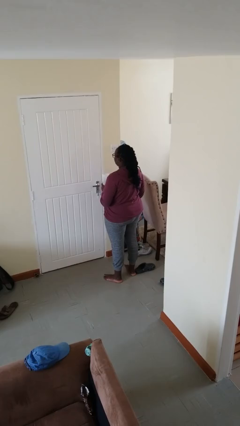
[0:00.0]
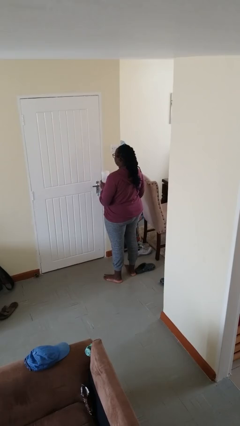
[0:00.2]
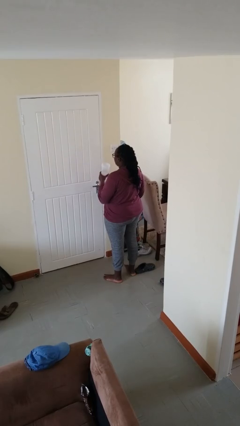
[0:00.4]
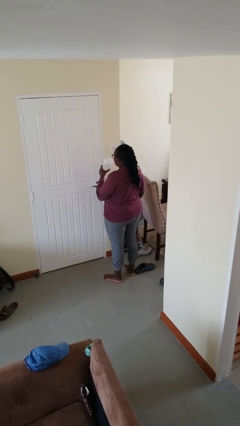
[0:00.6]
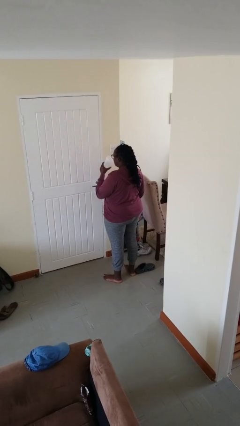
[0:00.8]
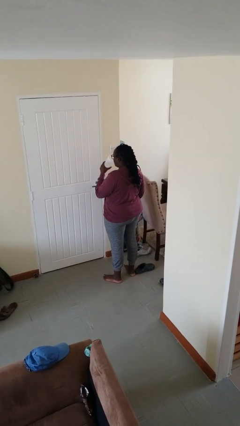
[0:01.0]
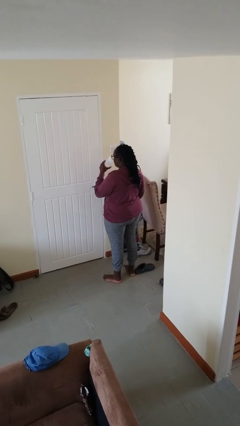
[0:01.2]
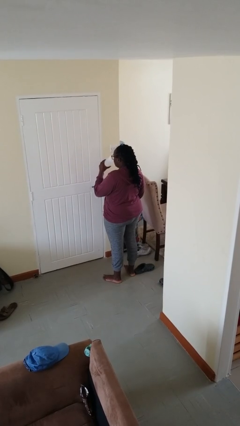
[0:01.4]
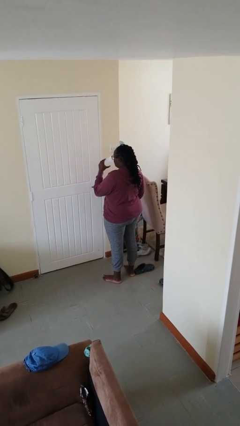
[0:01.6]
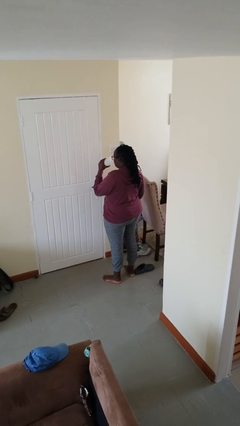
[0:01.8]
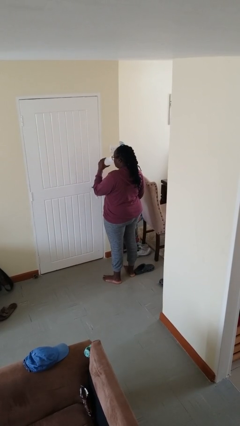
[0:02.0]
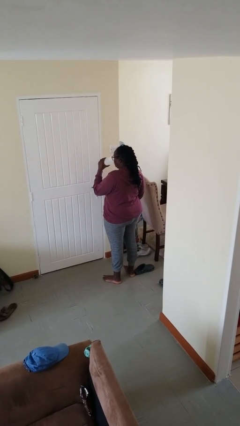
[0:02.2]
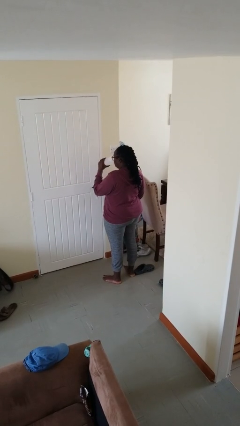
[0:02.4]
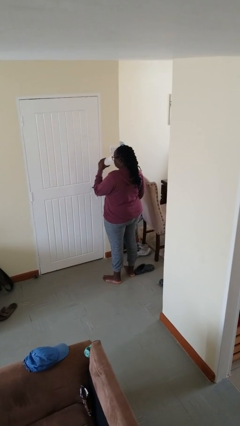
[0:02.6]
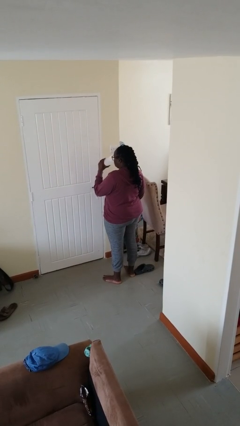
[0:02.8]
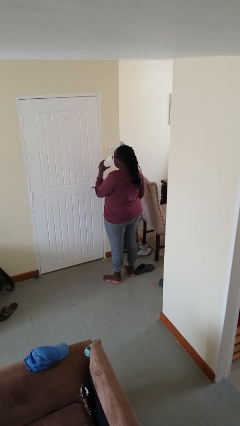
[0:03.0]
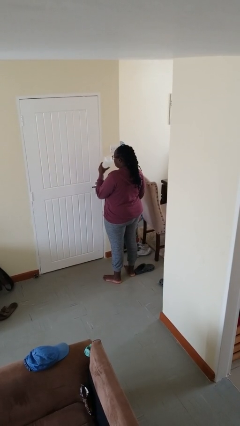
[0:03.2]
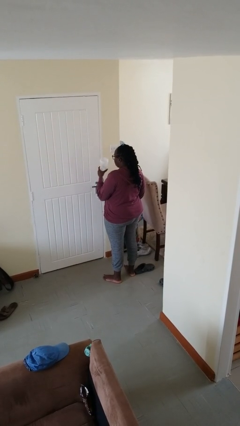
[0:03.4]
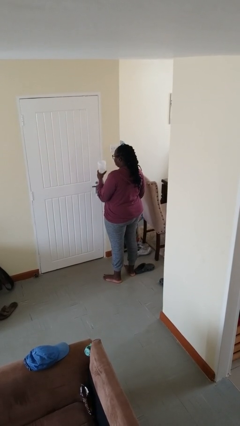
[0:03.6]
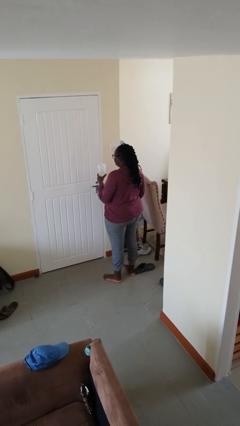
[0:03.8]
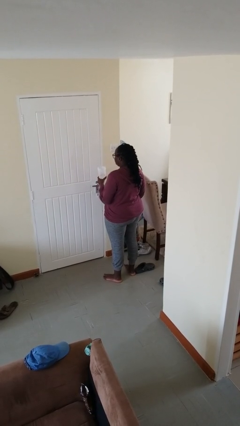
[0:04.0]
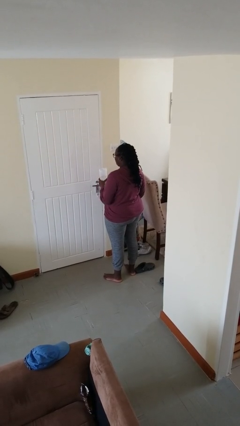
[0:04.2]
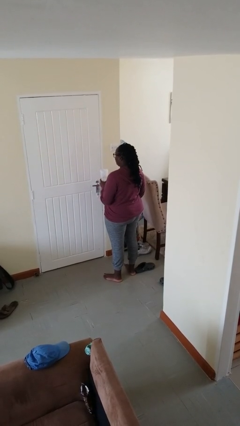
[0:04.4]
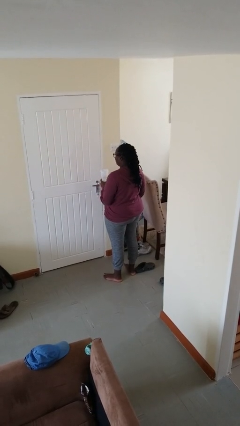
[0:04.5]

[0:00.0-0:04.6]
person drinks from bottle

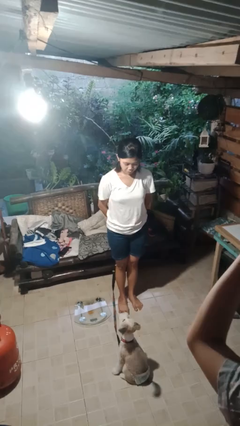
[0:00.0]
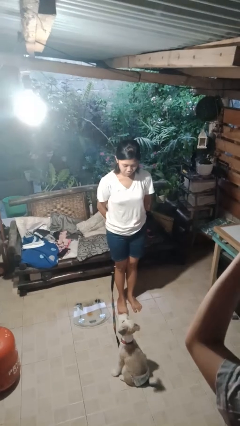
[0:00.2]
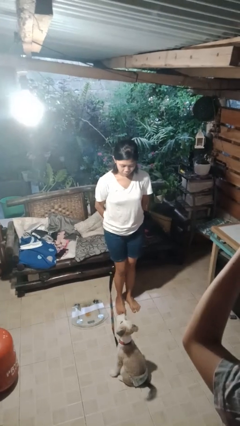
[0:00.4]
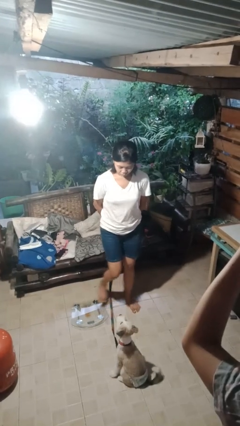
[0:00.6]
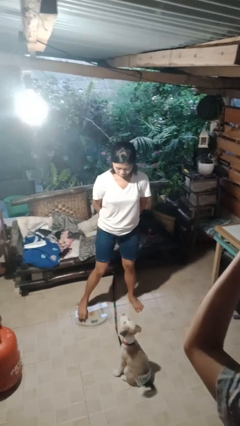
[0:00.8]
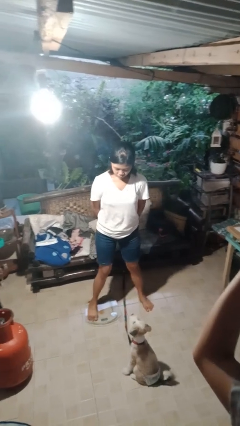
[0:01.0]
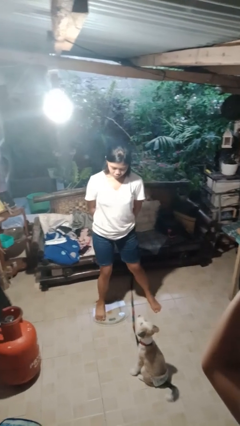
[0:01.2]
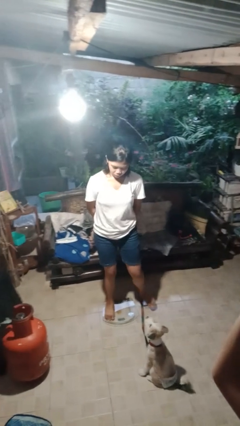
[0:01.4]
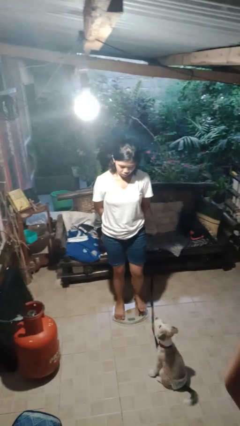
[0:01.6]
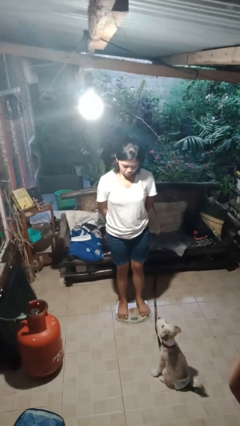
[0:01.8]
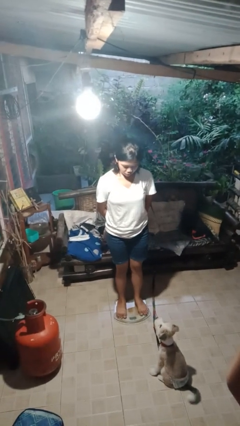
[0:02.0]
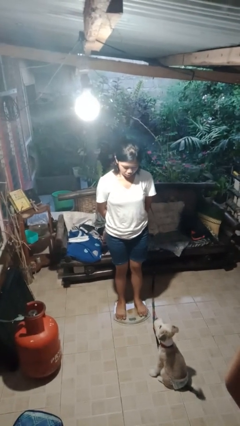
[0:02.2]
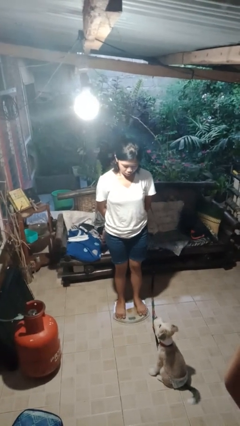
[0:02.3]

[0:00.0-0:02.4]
person uses bodyweight scale

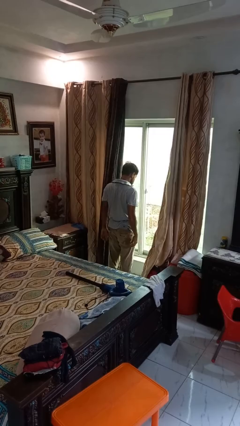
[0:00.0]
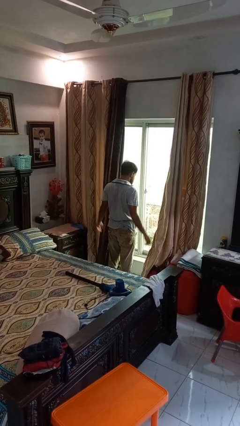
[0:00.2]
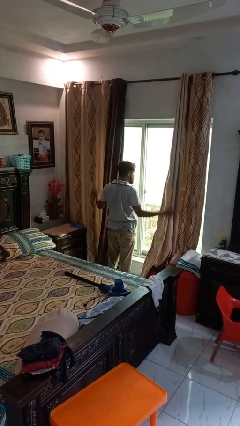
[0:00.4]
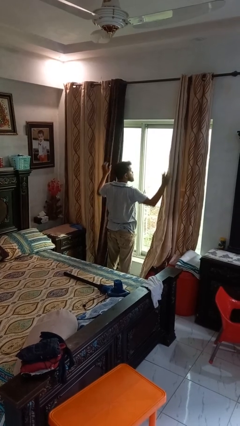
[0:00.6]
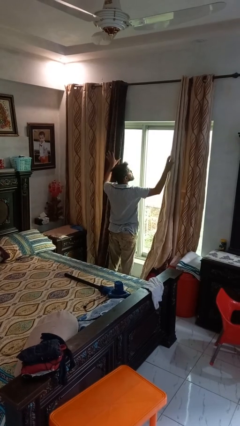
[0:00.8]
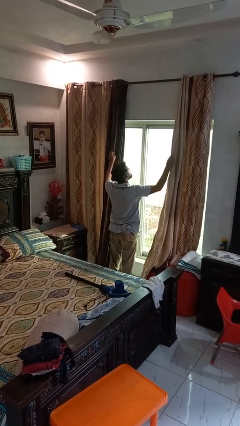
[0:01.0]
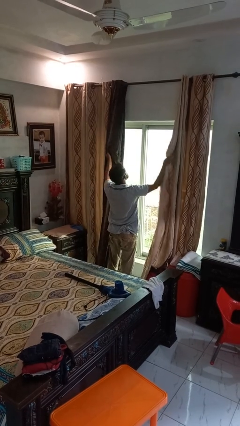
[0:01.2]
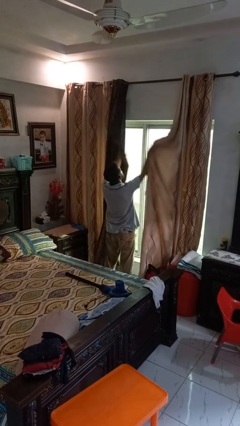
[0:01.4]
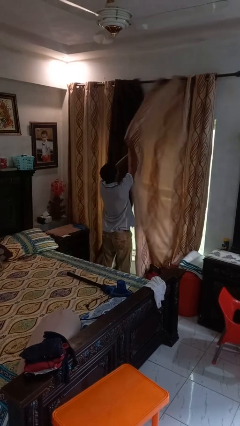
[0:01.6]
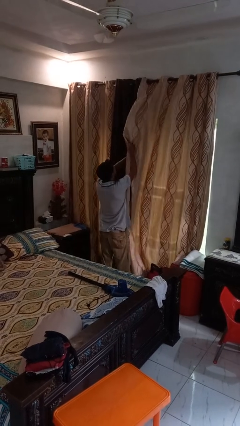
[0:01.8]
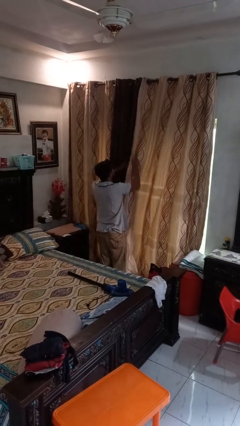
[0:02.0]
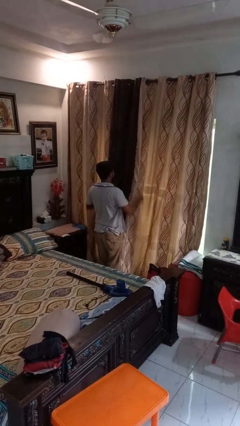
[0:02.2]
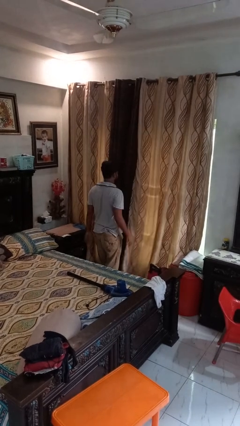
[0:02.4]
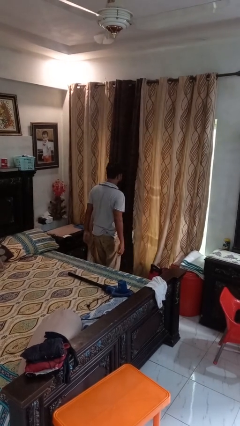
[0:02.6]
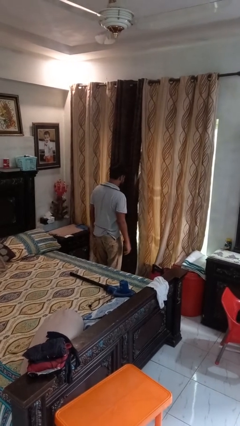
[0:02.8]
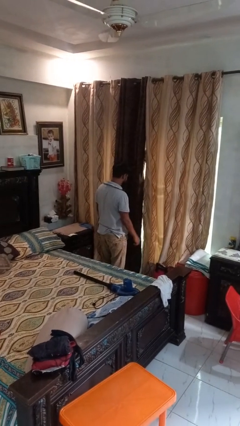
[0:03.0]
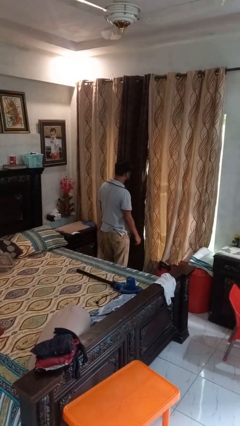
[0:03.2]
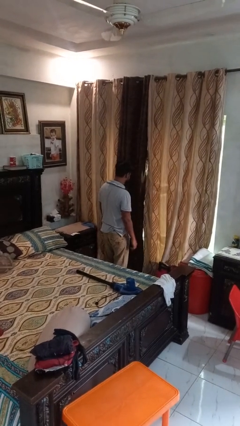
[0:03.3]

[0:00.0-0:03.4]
person closes curtains

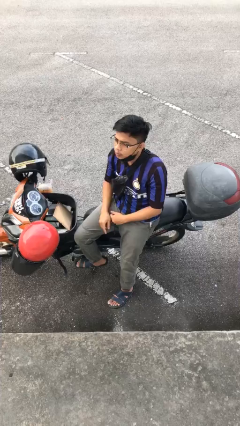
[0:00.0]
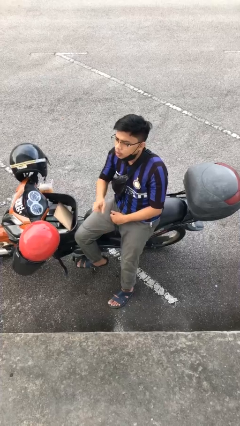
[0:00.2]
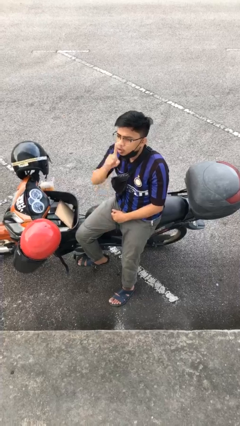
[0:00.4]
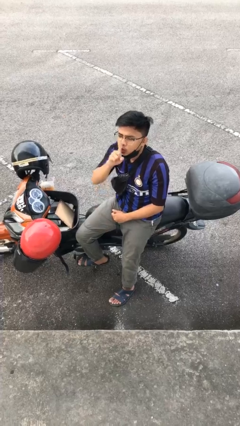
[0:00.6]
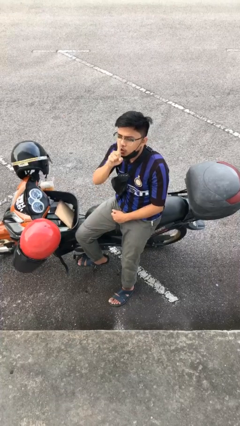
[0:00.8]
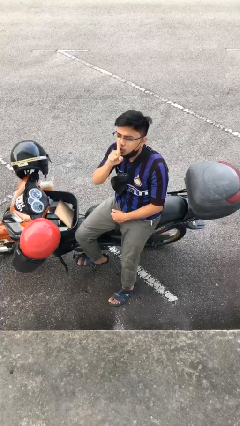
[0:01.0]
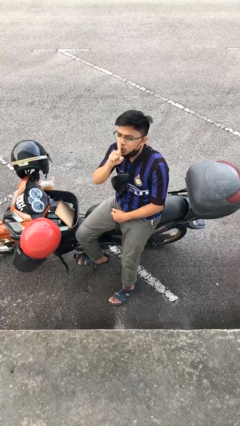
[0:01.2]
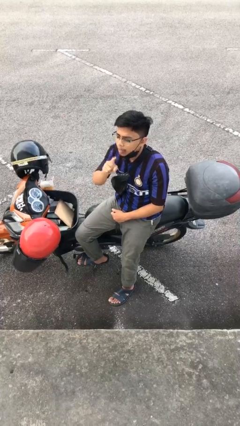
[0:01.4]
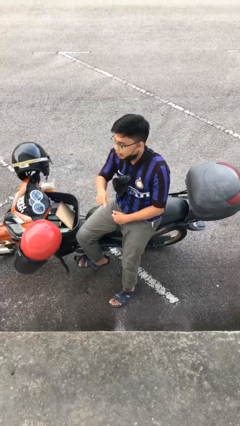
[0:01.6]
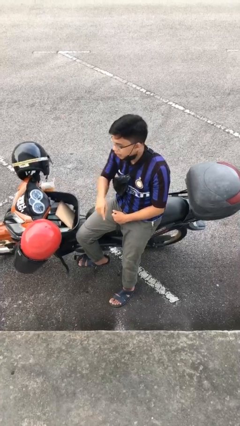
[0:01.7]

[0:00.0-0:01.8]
person gestures be quiet

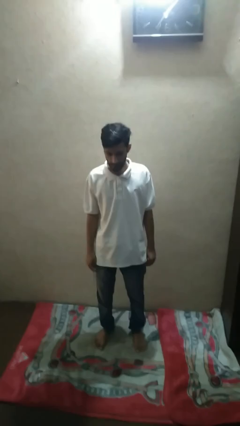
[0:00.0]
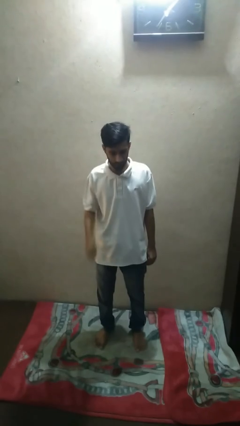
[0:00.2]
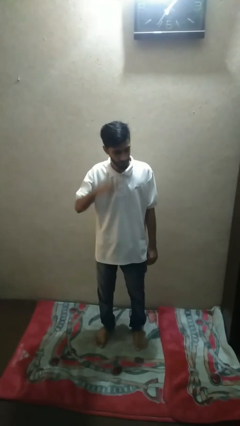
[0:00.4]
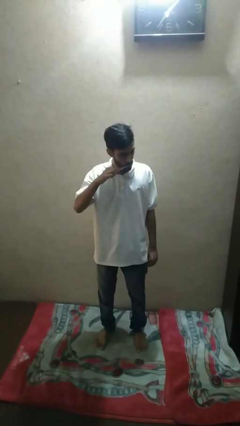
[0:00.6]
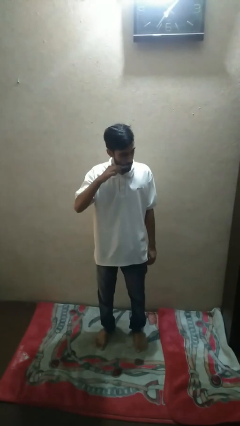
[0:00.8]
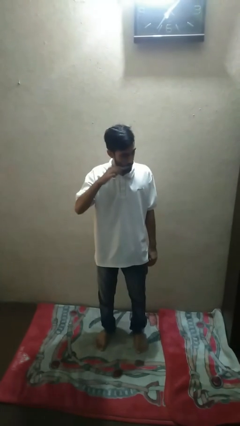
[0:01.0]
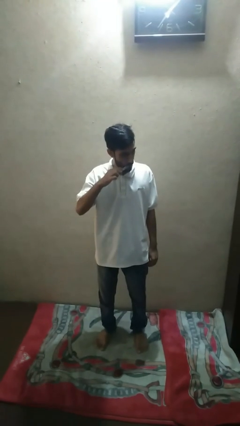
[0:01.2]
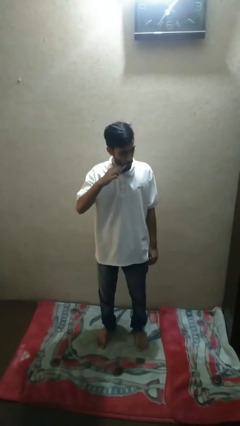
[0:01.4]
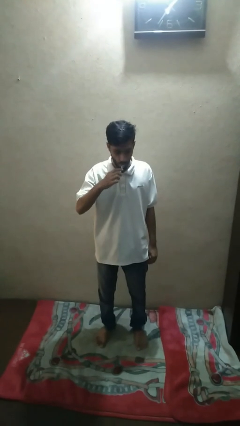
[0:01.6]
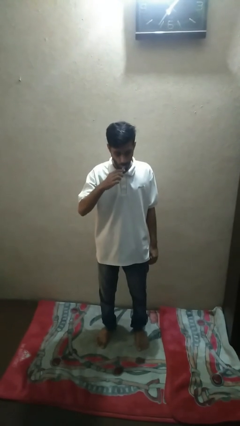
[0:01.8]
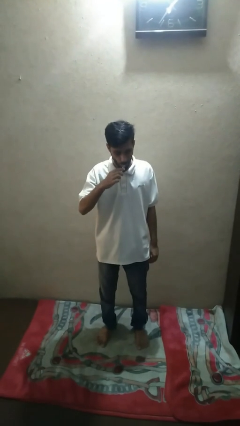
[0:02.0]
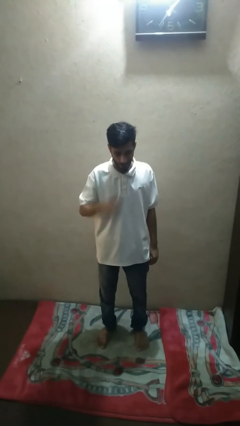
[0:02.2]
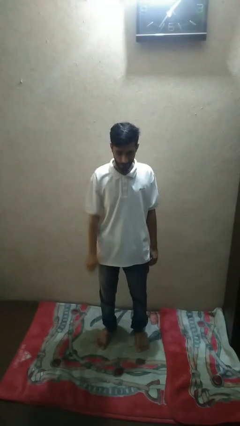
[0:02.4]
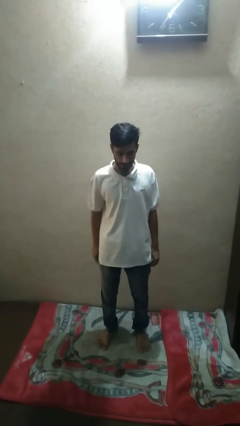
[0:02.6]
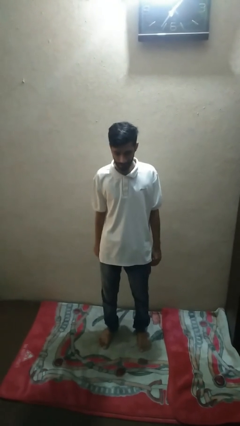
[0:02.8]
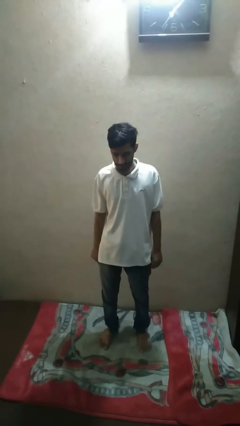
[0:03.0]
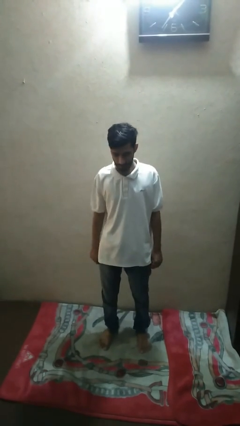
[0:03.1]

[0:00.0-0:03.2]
person brushes teeth

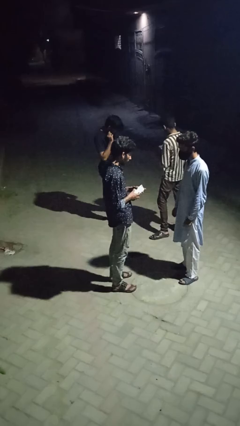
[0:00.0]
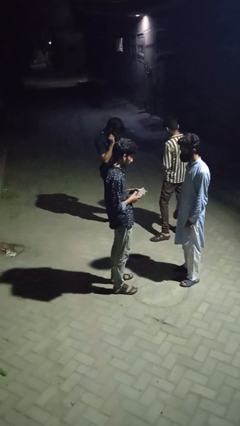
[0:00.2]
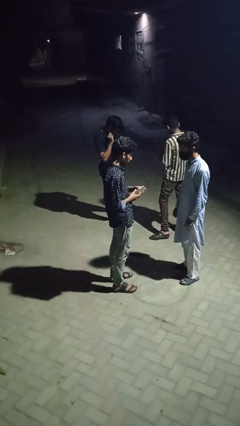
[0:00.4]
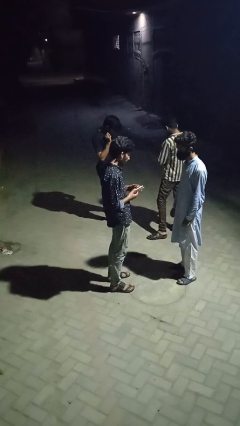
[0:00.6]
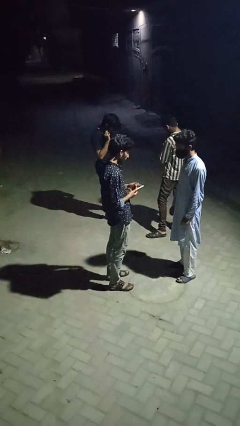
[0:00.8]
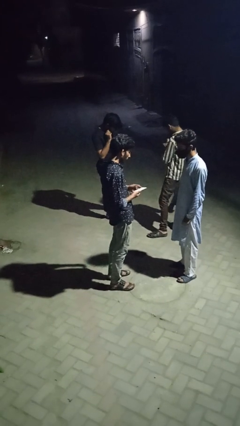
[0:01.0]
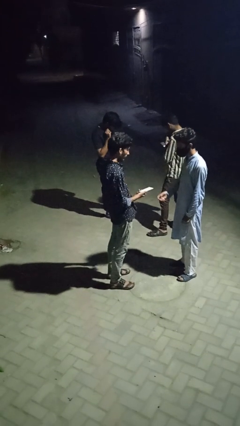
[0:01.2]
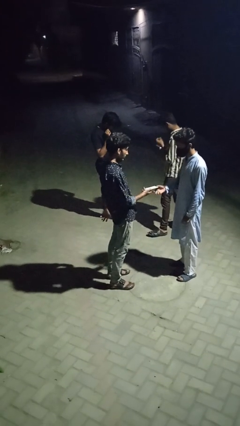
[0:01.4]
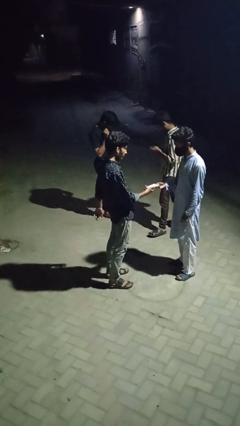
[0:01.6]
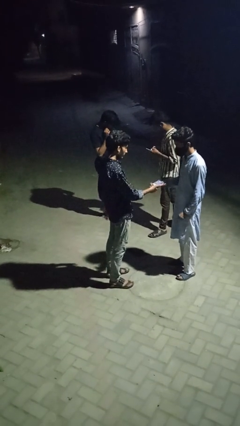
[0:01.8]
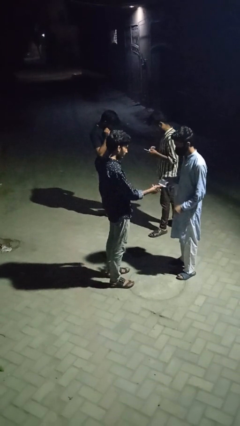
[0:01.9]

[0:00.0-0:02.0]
person transfers object to person

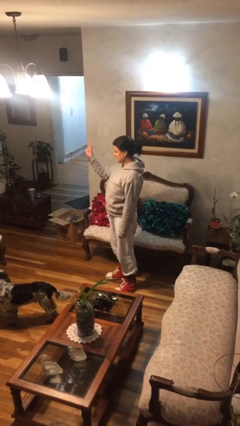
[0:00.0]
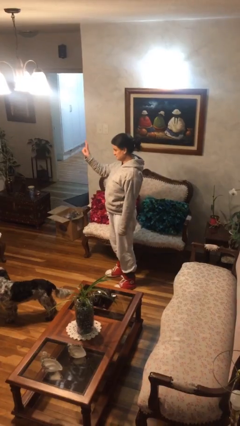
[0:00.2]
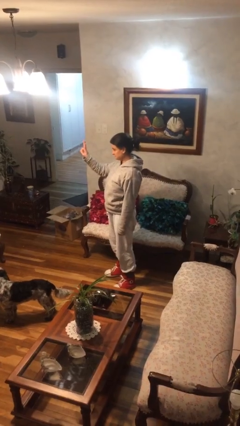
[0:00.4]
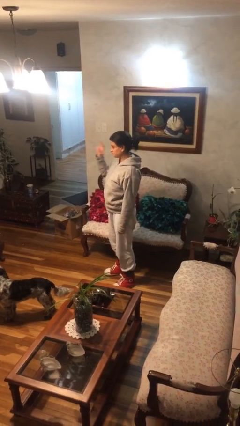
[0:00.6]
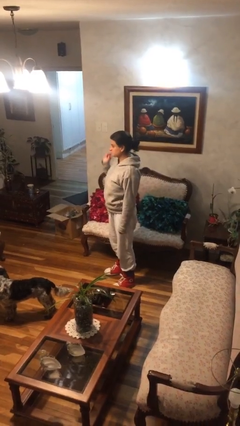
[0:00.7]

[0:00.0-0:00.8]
person gestures number three
